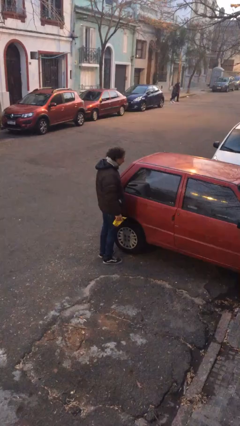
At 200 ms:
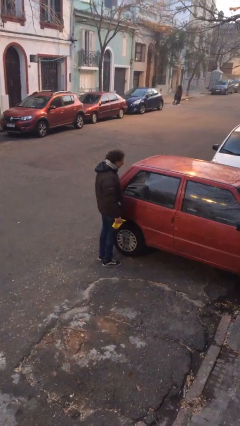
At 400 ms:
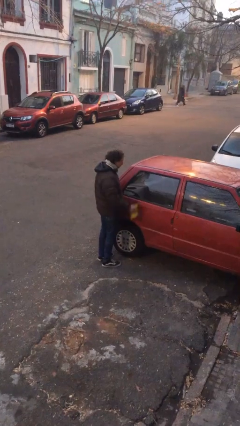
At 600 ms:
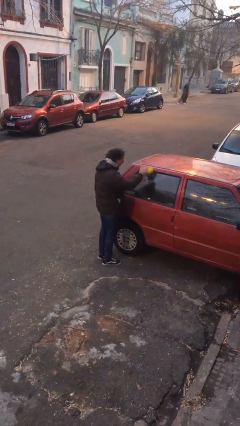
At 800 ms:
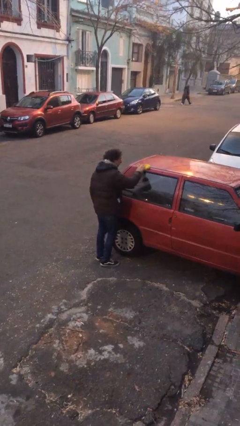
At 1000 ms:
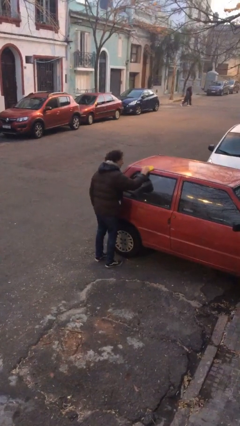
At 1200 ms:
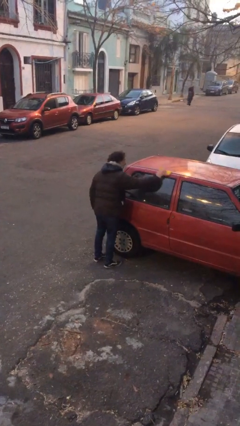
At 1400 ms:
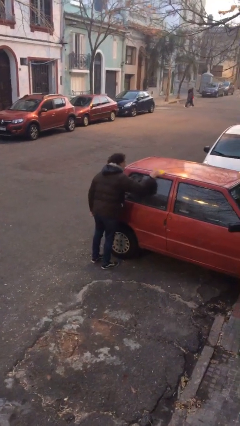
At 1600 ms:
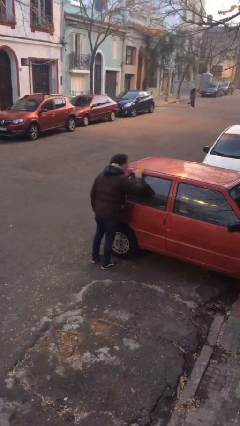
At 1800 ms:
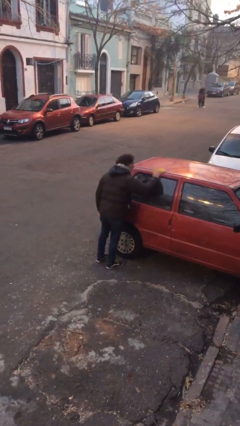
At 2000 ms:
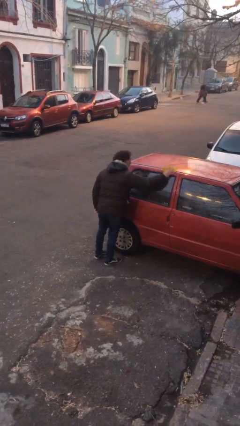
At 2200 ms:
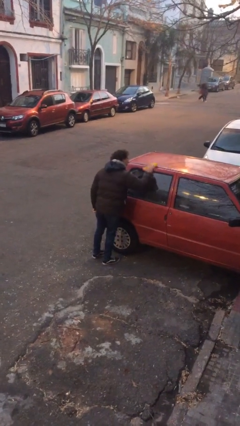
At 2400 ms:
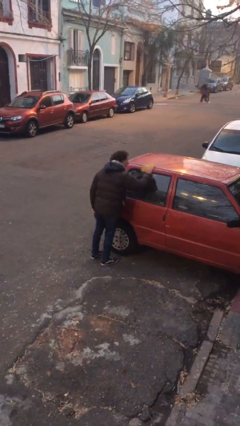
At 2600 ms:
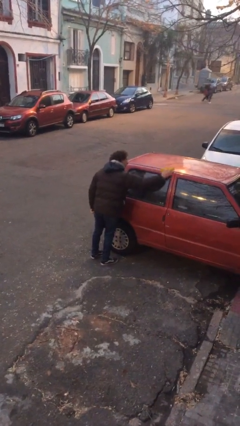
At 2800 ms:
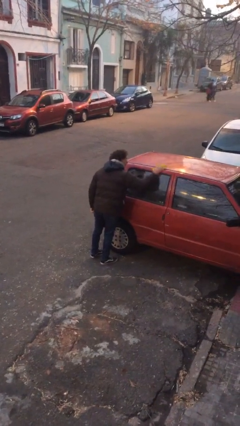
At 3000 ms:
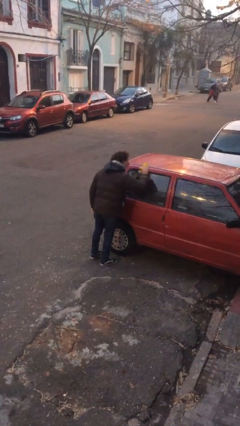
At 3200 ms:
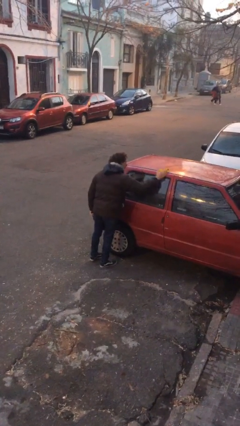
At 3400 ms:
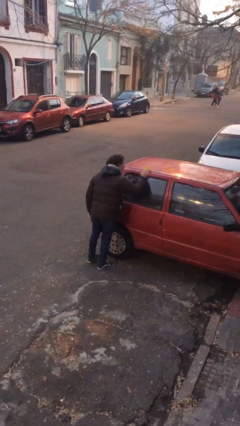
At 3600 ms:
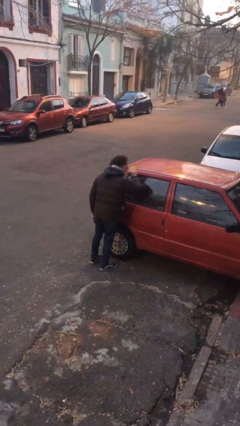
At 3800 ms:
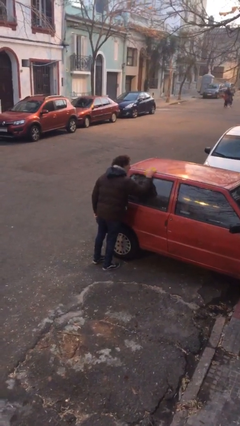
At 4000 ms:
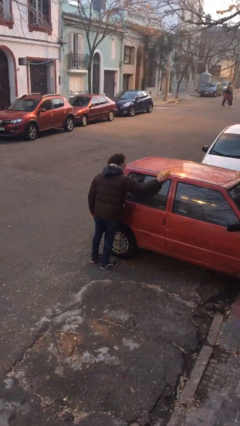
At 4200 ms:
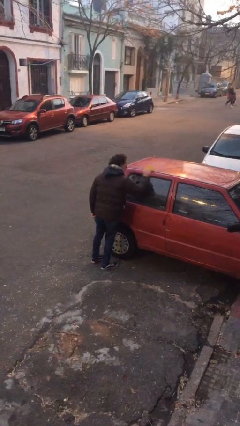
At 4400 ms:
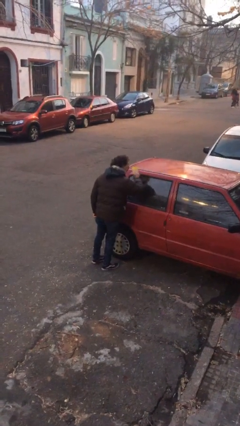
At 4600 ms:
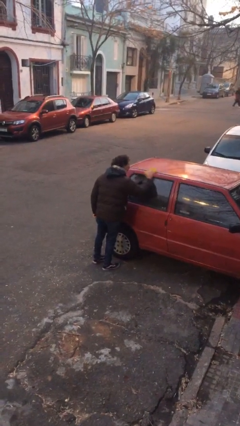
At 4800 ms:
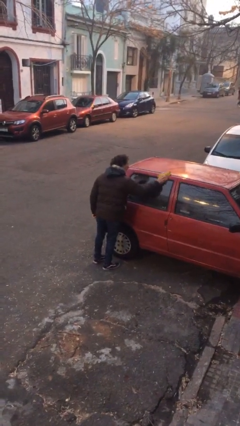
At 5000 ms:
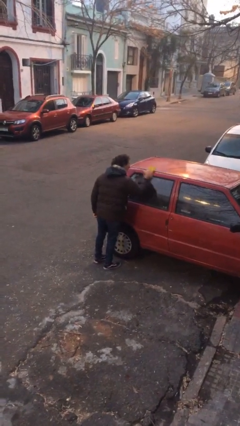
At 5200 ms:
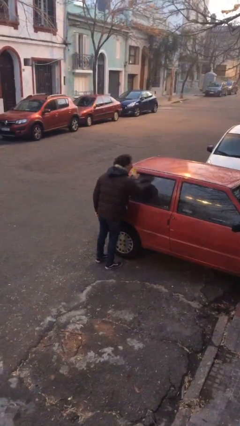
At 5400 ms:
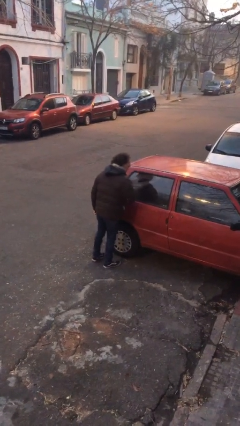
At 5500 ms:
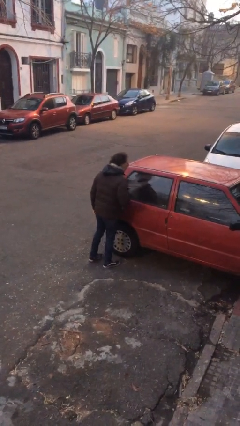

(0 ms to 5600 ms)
person polishes car with rag

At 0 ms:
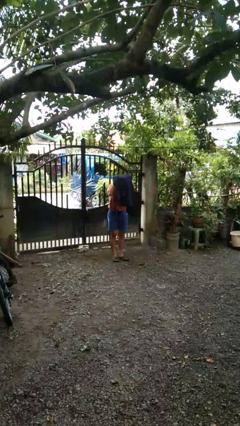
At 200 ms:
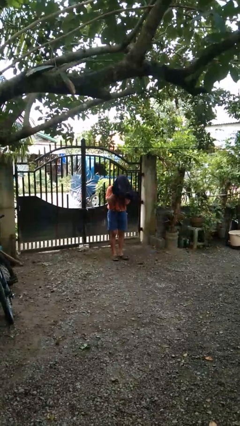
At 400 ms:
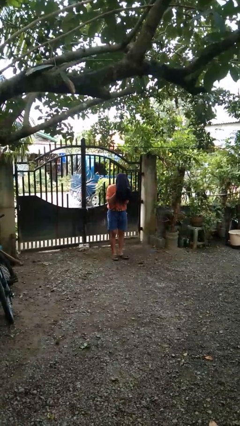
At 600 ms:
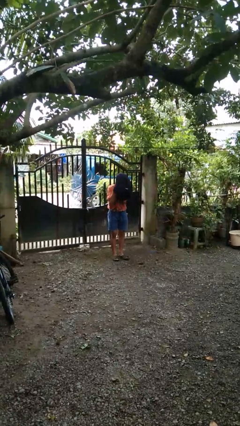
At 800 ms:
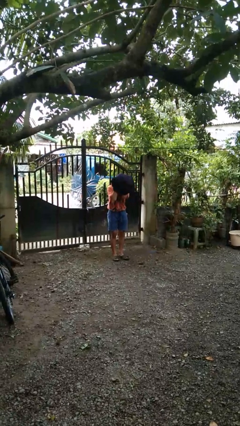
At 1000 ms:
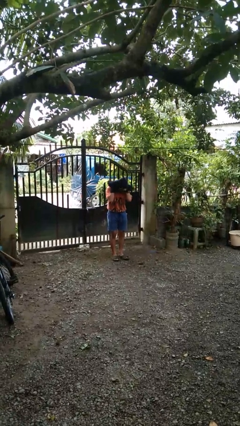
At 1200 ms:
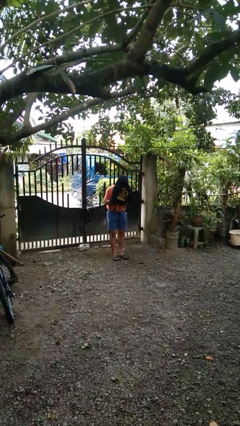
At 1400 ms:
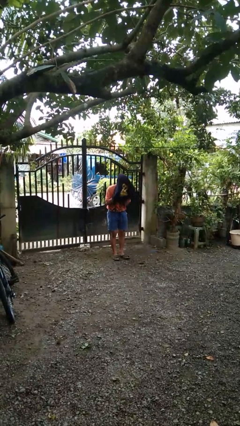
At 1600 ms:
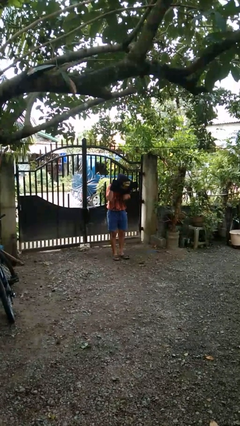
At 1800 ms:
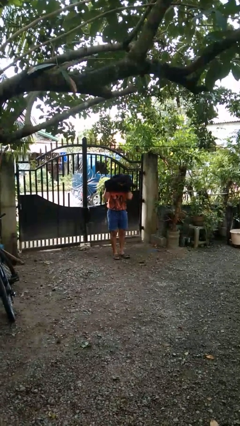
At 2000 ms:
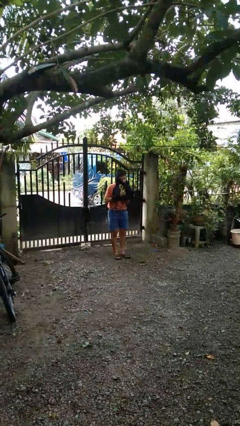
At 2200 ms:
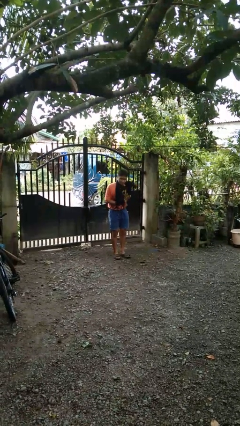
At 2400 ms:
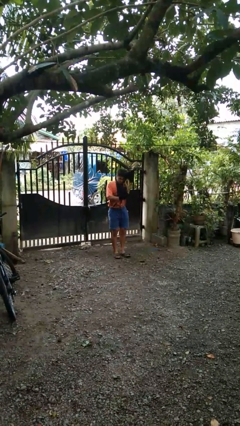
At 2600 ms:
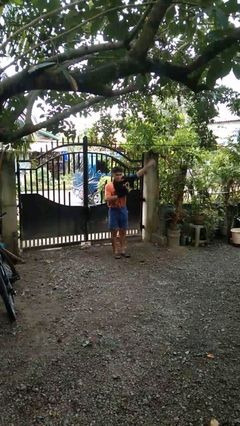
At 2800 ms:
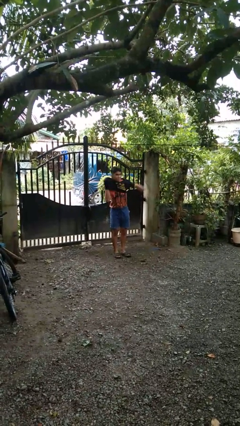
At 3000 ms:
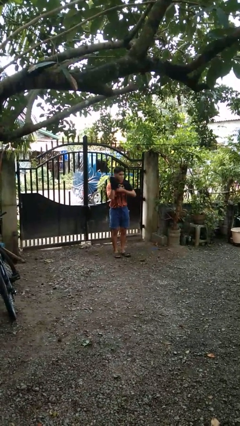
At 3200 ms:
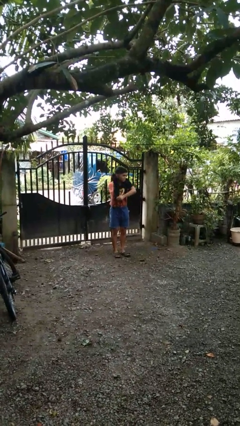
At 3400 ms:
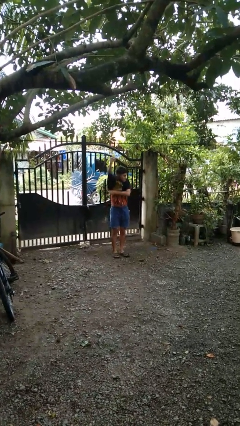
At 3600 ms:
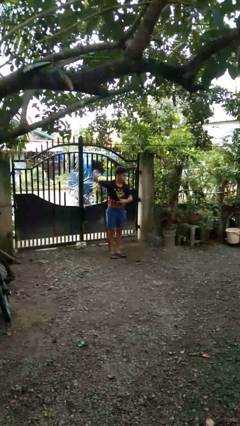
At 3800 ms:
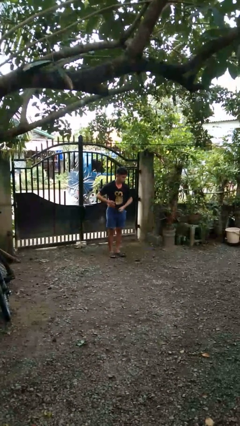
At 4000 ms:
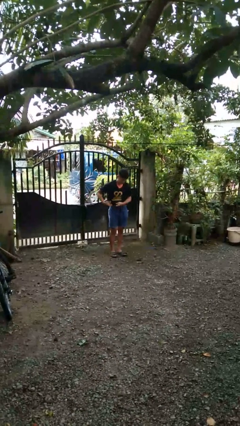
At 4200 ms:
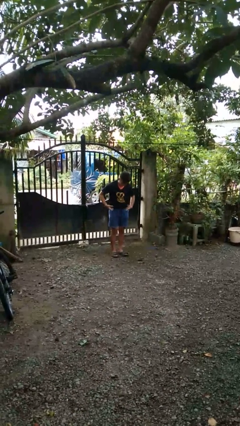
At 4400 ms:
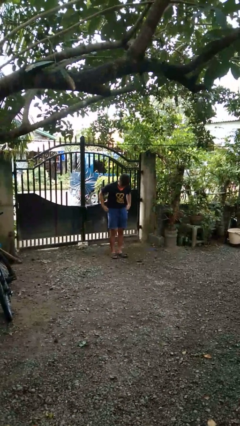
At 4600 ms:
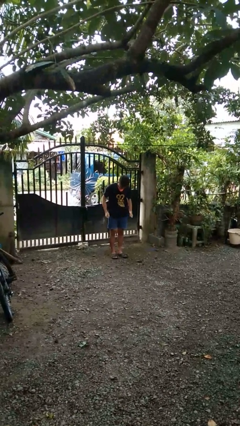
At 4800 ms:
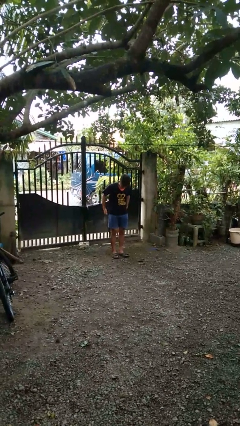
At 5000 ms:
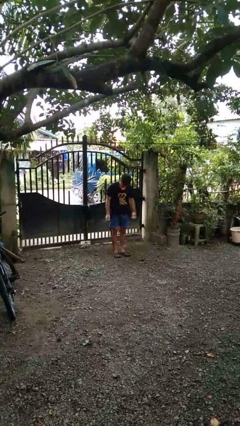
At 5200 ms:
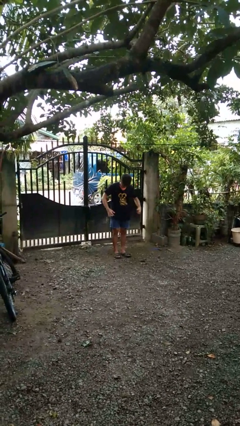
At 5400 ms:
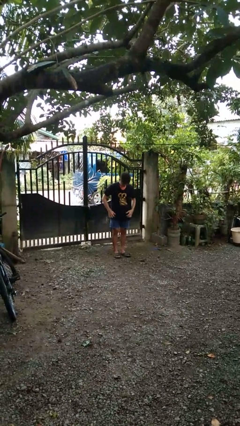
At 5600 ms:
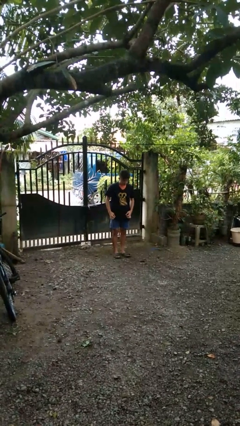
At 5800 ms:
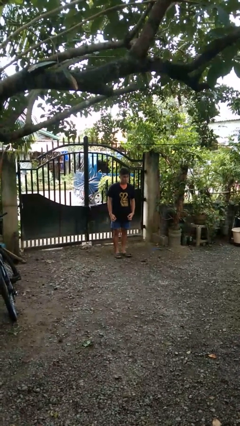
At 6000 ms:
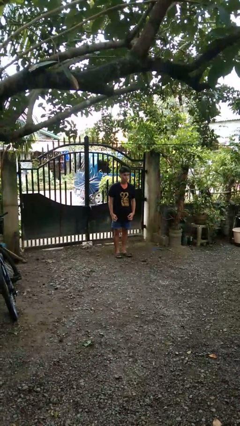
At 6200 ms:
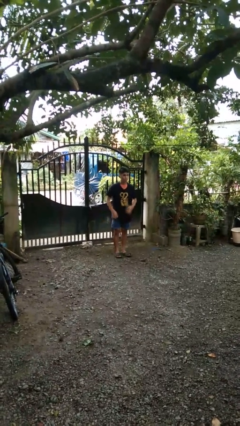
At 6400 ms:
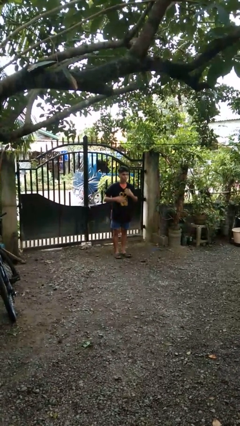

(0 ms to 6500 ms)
person puts on shirt

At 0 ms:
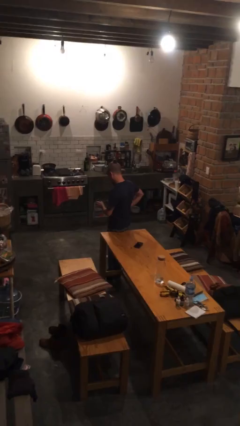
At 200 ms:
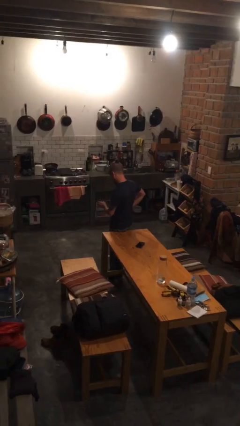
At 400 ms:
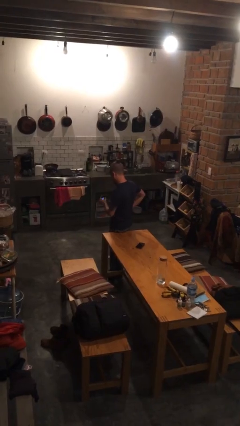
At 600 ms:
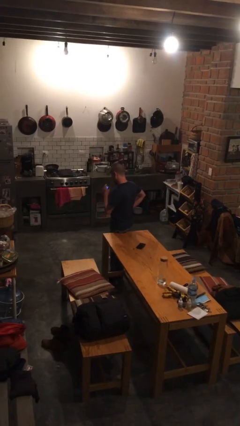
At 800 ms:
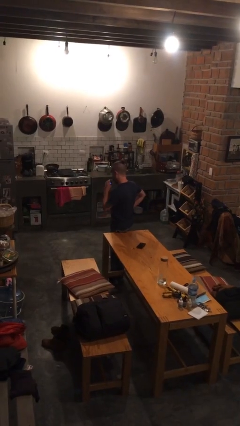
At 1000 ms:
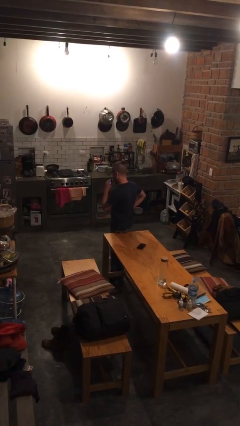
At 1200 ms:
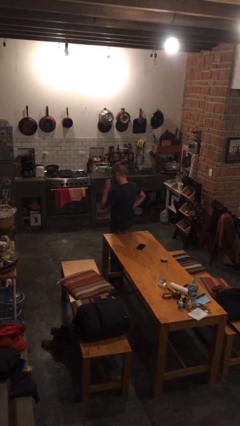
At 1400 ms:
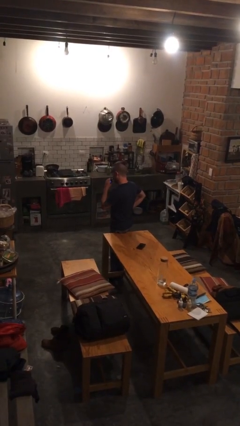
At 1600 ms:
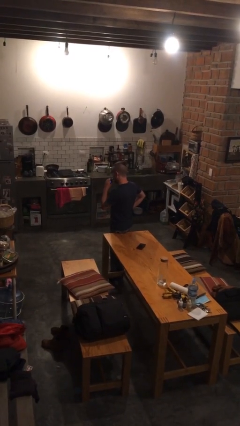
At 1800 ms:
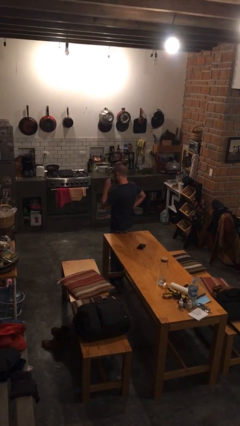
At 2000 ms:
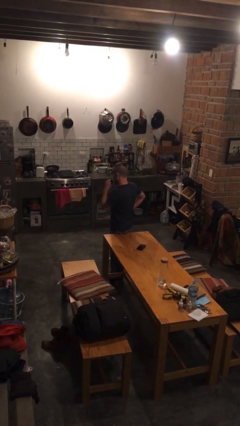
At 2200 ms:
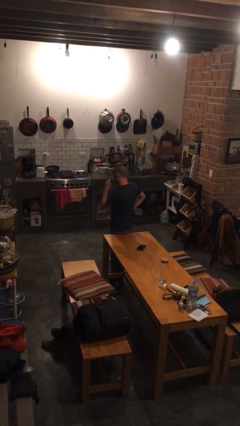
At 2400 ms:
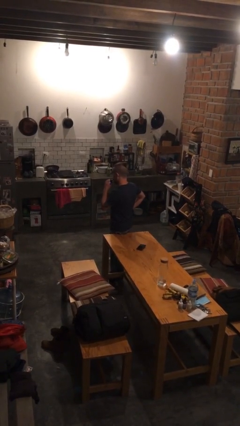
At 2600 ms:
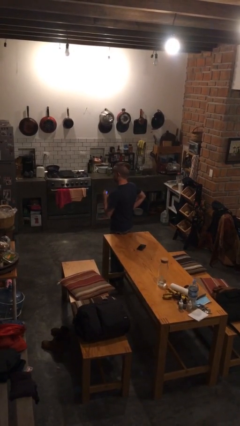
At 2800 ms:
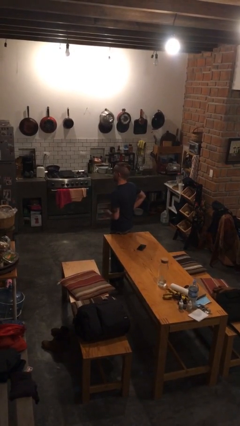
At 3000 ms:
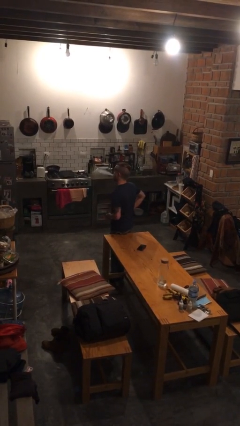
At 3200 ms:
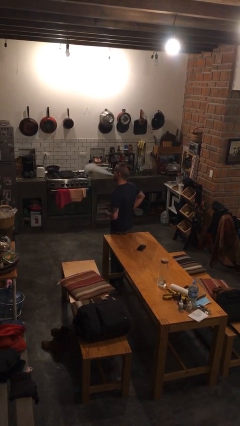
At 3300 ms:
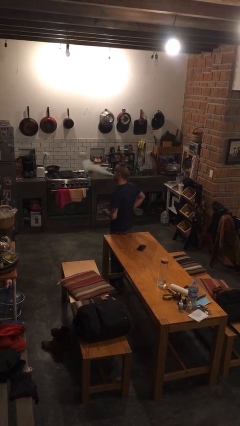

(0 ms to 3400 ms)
person vapes

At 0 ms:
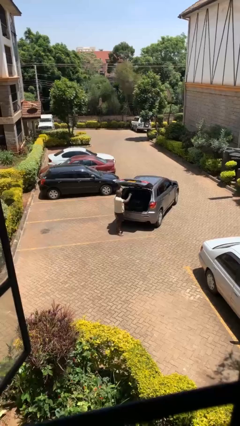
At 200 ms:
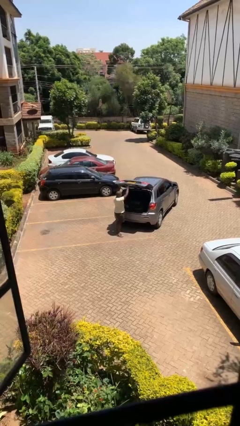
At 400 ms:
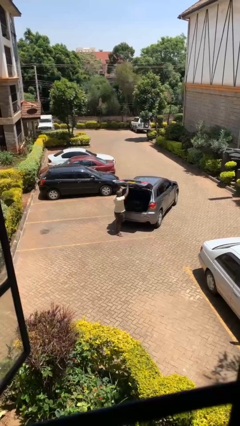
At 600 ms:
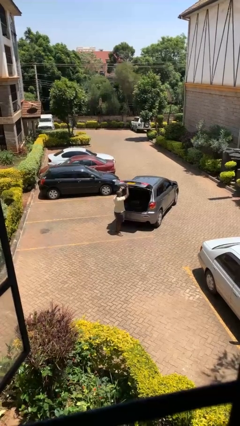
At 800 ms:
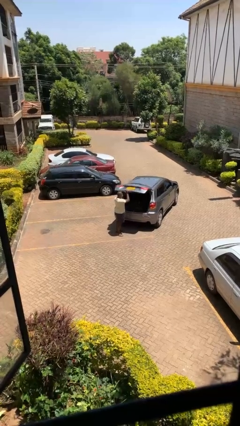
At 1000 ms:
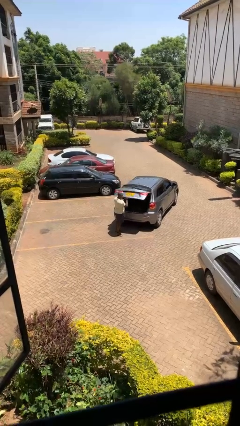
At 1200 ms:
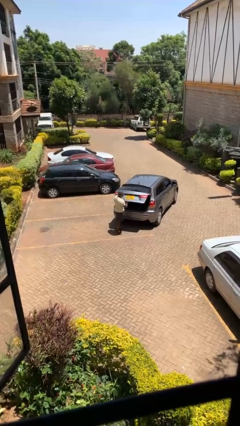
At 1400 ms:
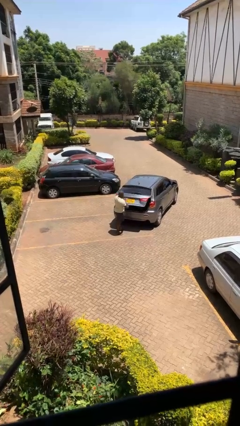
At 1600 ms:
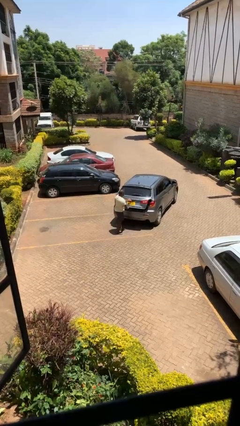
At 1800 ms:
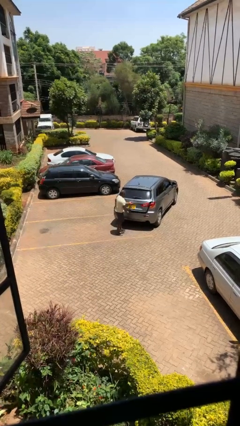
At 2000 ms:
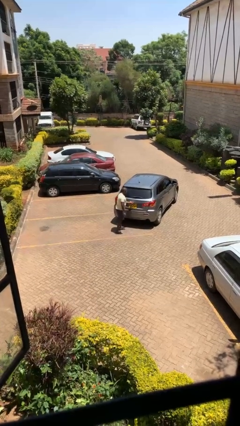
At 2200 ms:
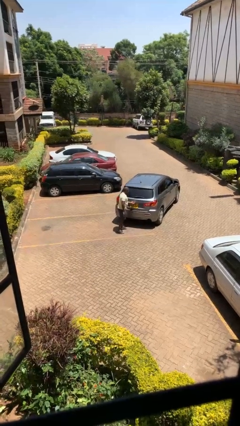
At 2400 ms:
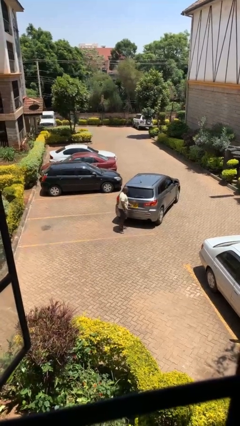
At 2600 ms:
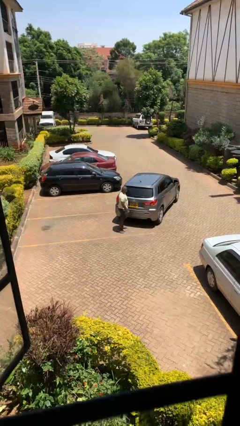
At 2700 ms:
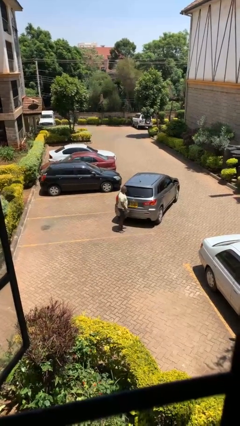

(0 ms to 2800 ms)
person closes car trunk
